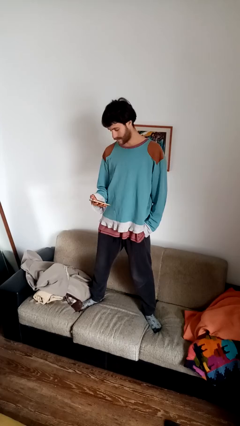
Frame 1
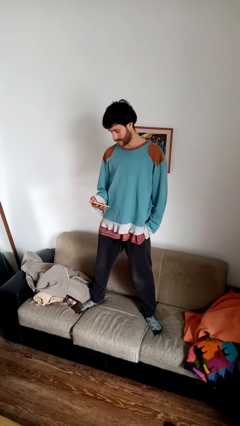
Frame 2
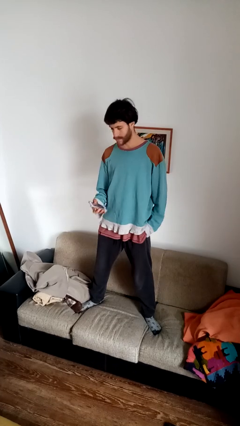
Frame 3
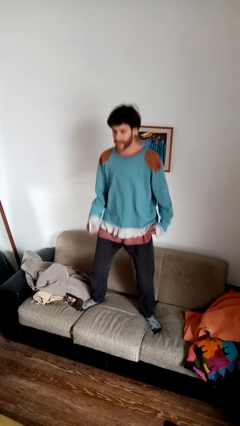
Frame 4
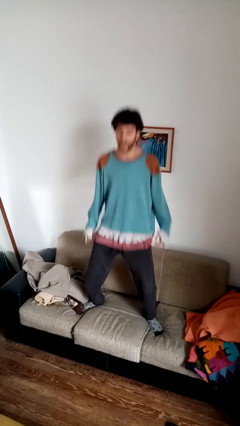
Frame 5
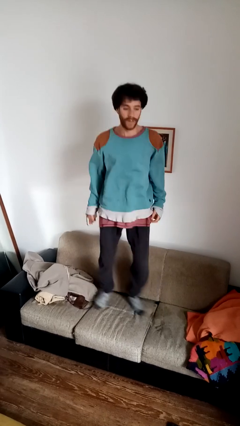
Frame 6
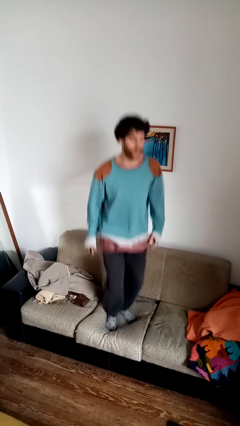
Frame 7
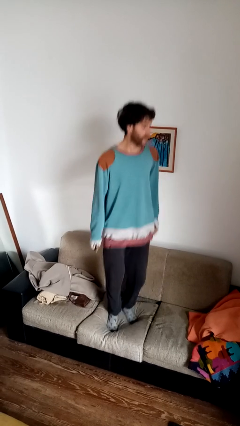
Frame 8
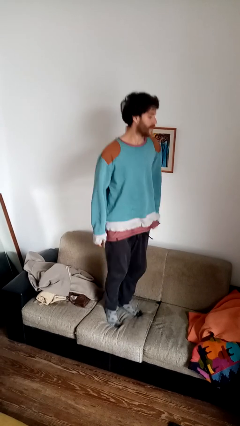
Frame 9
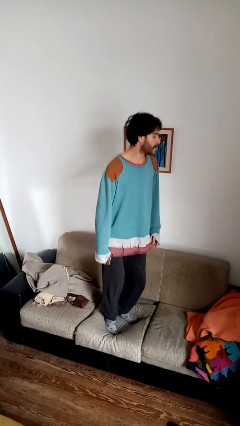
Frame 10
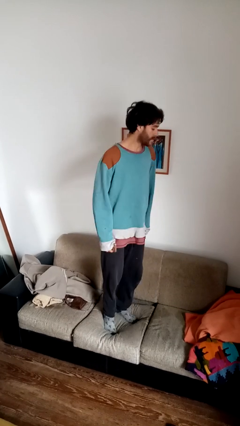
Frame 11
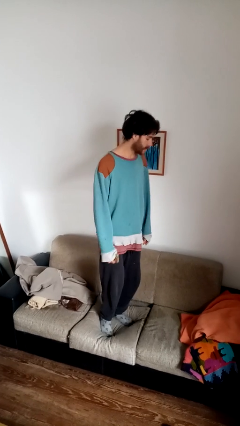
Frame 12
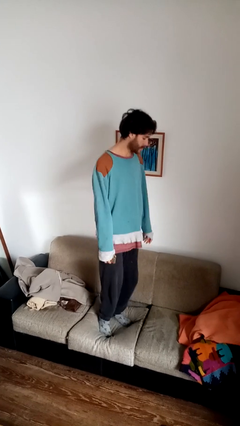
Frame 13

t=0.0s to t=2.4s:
person jumps on couch

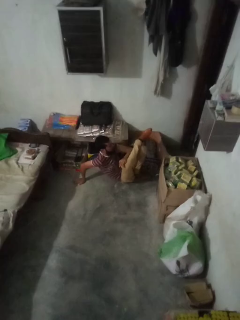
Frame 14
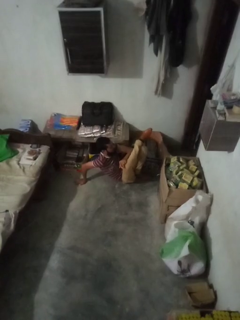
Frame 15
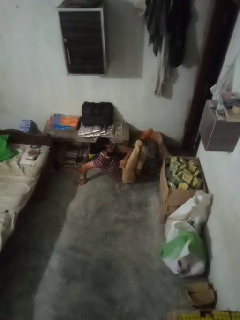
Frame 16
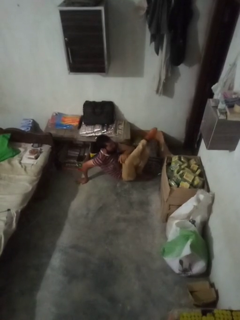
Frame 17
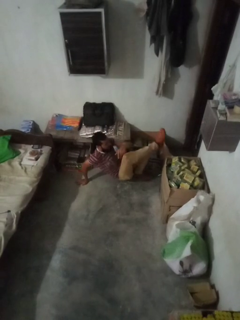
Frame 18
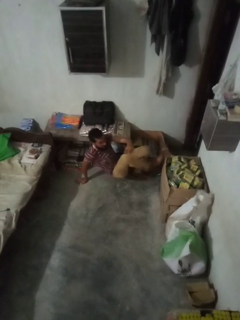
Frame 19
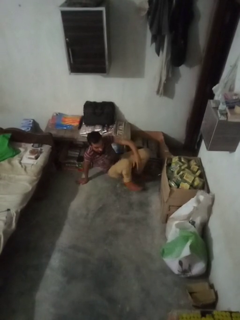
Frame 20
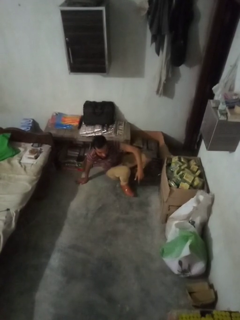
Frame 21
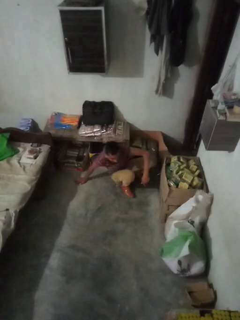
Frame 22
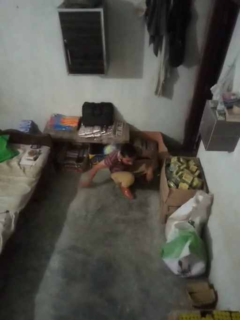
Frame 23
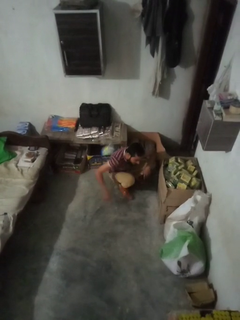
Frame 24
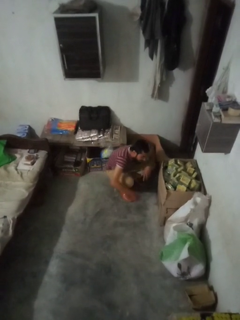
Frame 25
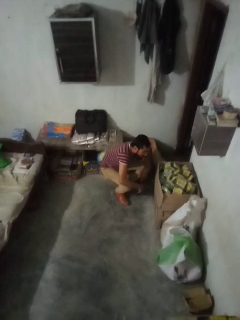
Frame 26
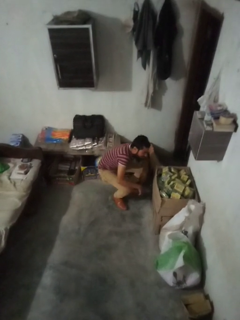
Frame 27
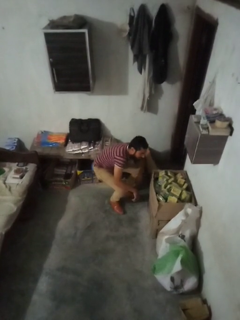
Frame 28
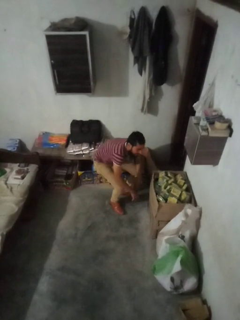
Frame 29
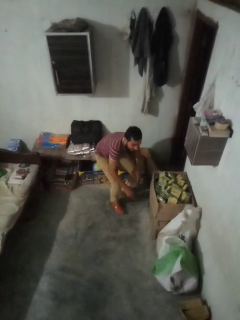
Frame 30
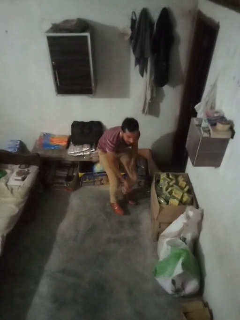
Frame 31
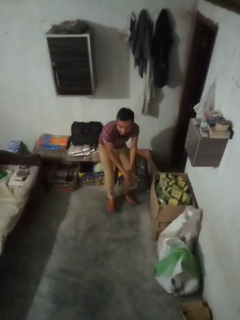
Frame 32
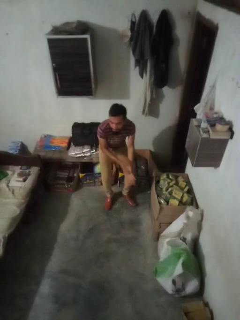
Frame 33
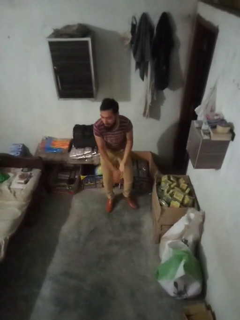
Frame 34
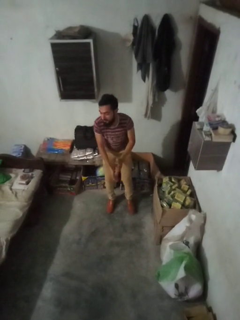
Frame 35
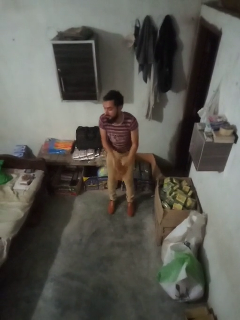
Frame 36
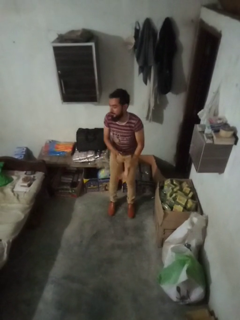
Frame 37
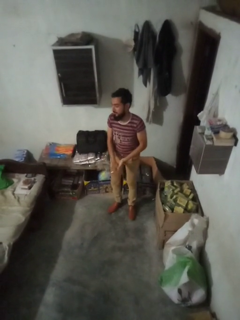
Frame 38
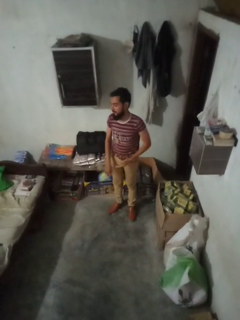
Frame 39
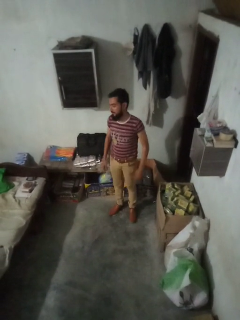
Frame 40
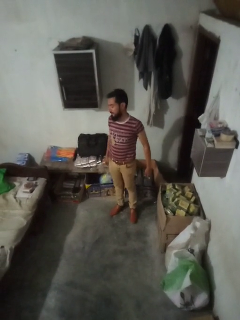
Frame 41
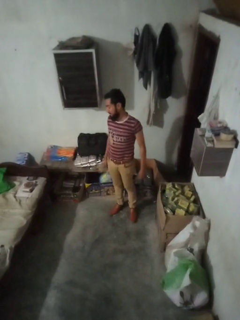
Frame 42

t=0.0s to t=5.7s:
person stands up from floor

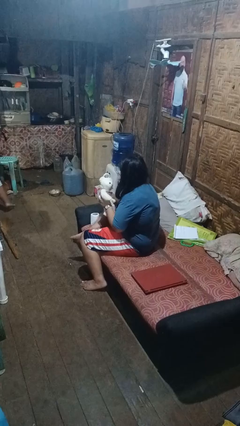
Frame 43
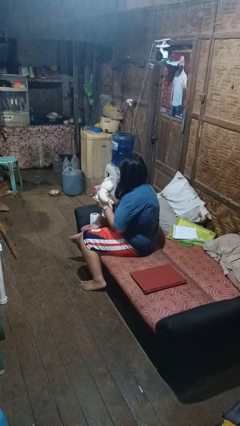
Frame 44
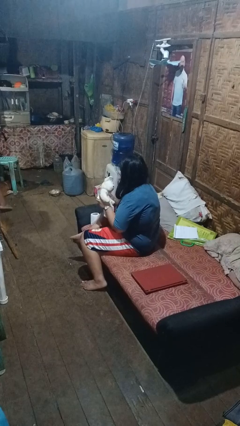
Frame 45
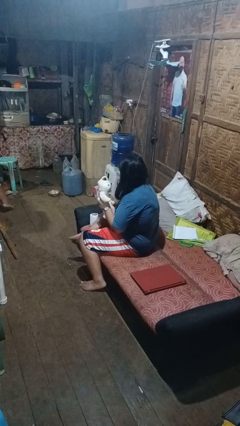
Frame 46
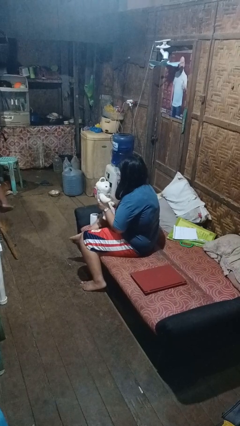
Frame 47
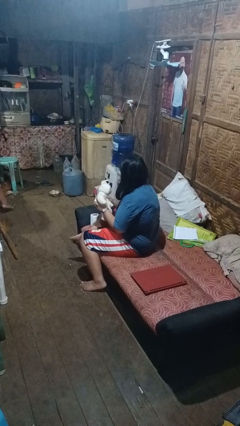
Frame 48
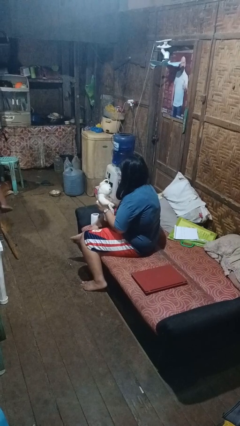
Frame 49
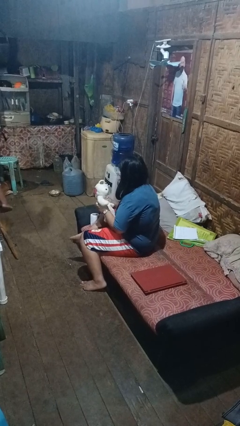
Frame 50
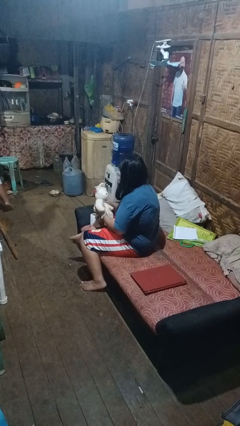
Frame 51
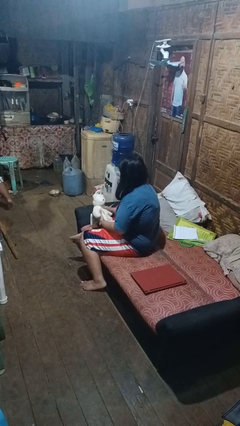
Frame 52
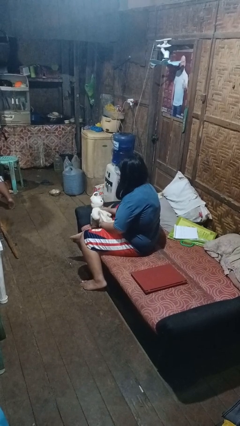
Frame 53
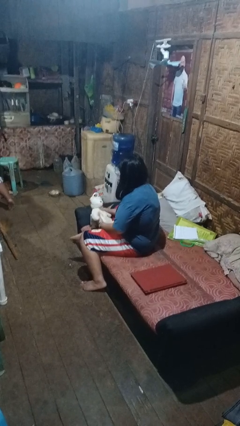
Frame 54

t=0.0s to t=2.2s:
person squeezes object

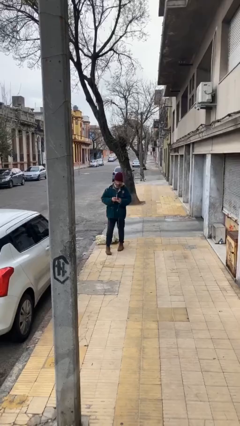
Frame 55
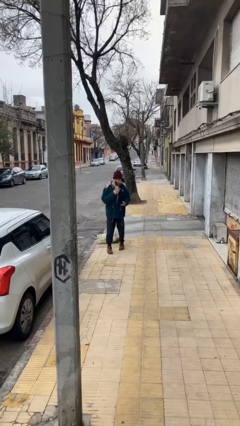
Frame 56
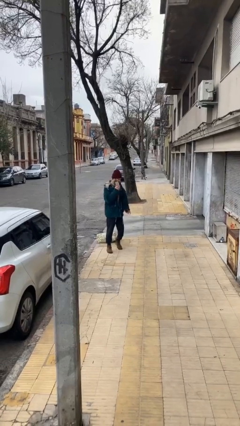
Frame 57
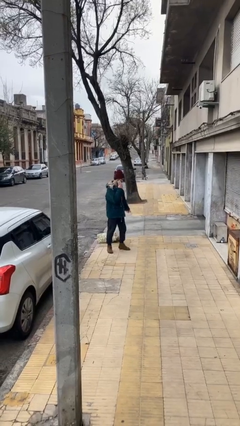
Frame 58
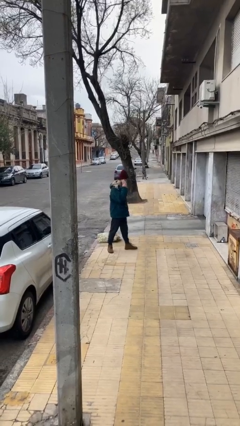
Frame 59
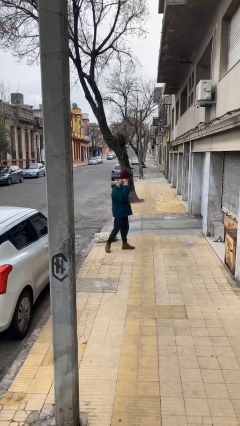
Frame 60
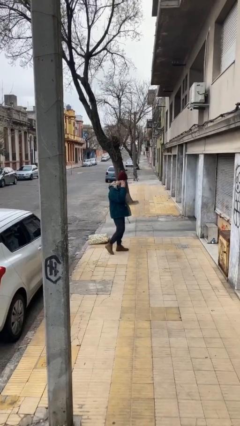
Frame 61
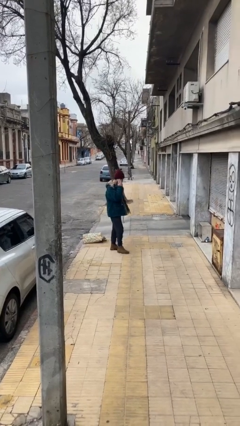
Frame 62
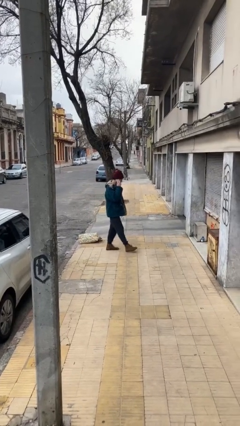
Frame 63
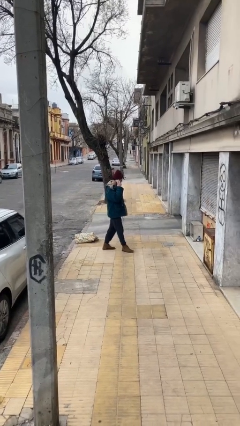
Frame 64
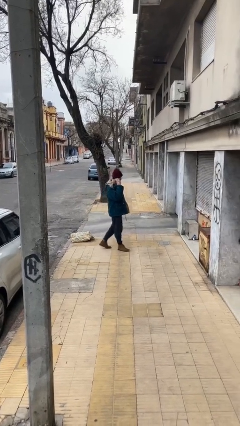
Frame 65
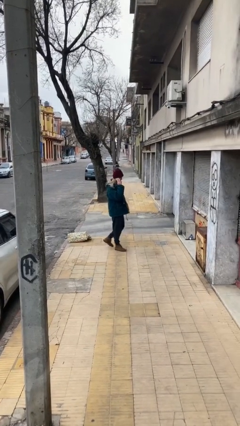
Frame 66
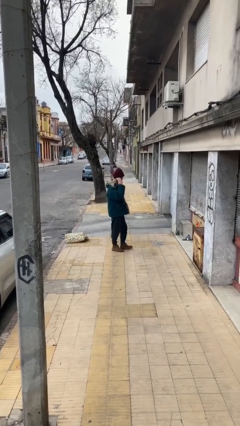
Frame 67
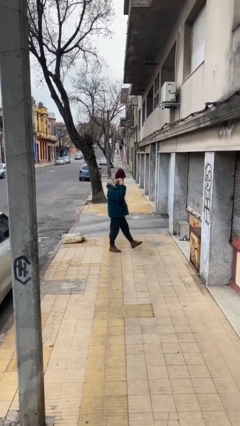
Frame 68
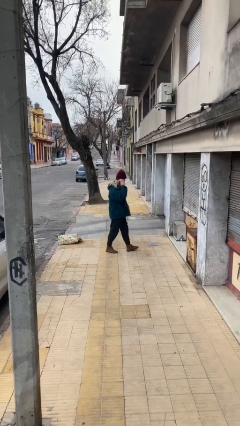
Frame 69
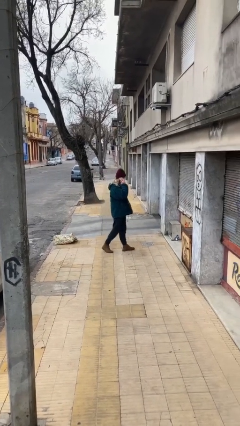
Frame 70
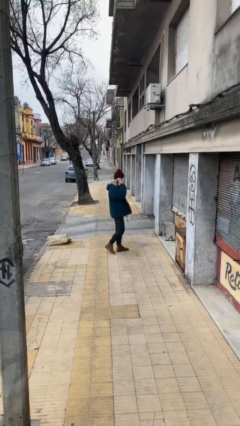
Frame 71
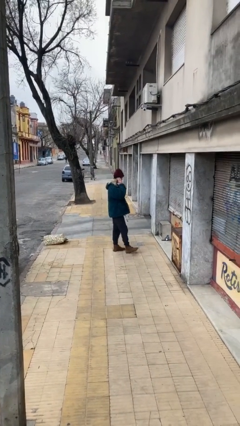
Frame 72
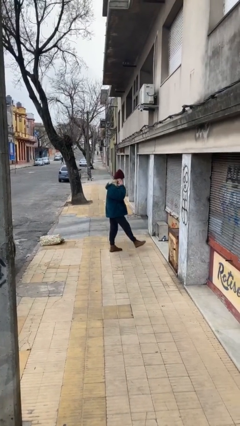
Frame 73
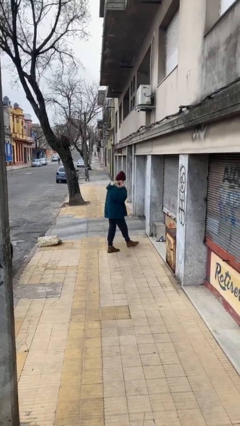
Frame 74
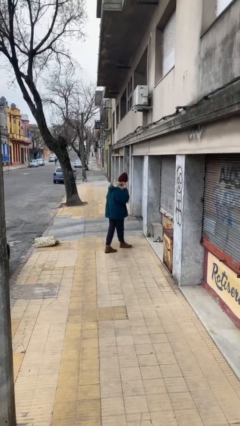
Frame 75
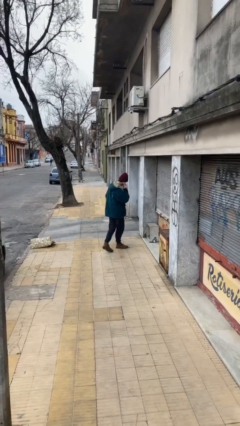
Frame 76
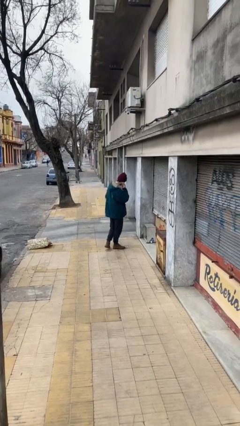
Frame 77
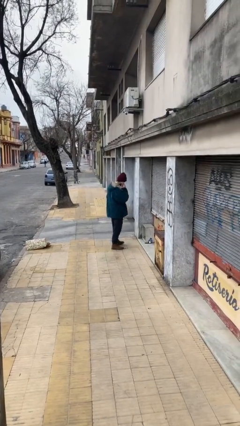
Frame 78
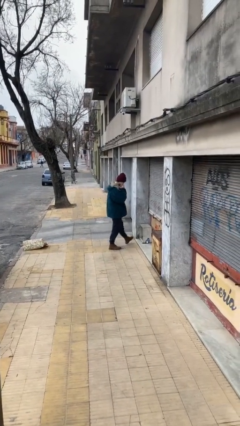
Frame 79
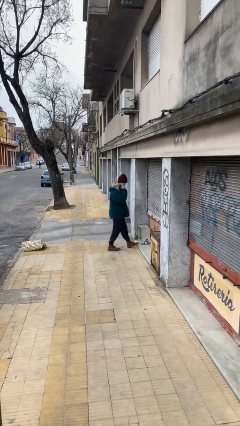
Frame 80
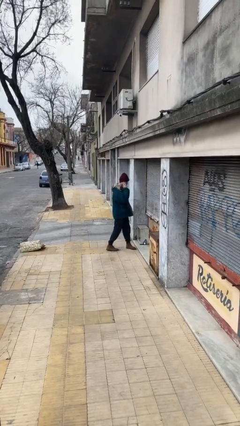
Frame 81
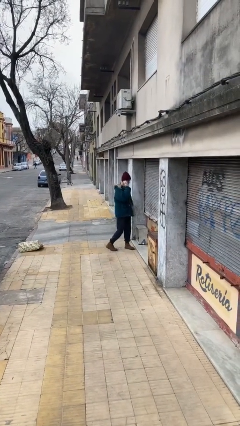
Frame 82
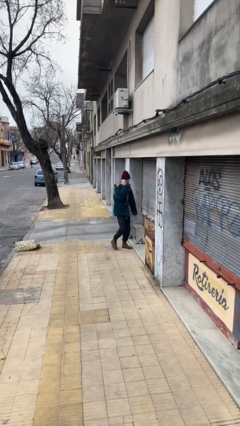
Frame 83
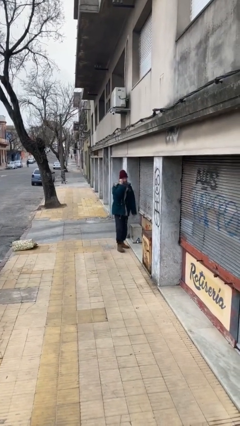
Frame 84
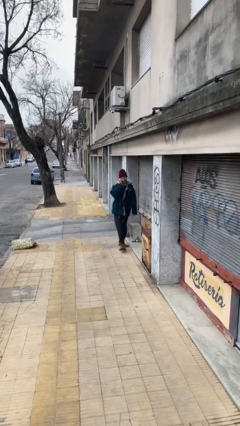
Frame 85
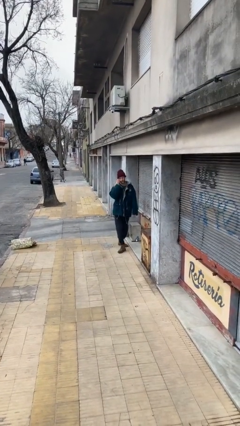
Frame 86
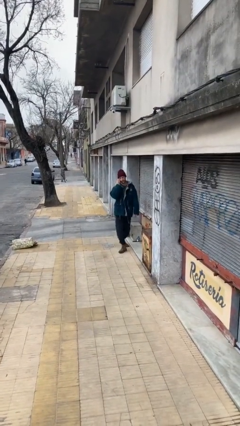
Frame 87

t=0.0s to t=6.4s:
person talks on phone

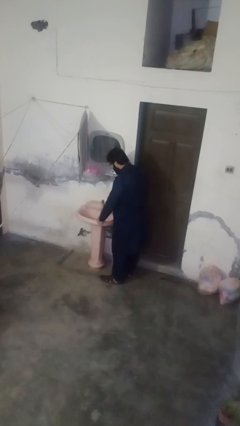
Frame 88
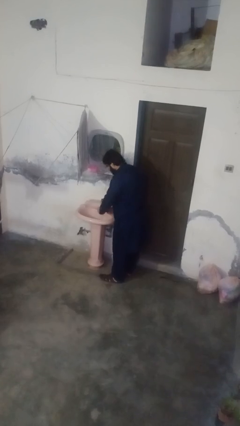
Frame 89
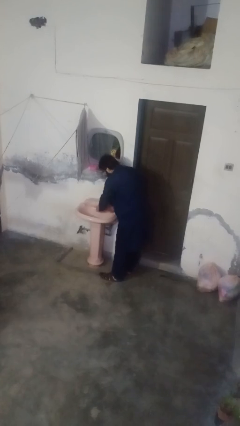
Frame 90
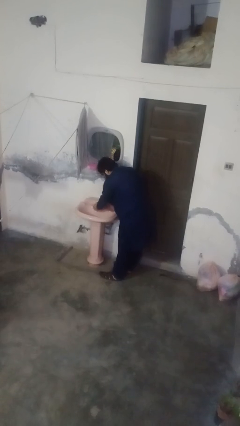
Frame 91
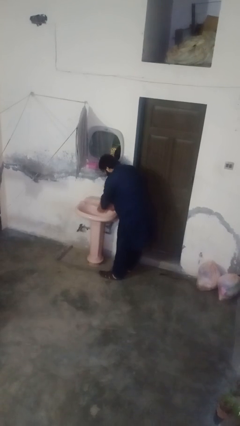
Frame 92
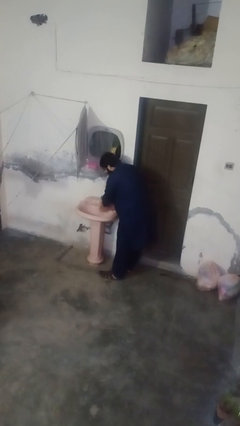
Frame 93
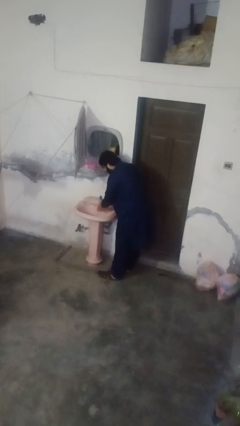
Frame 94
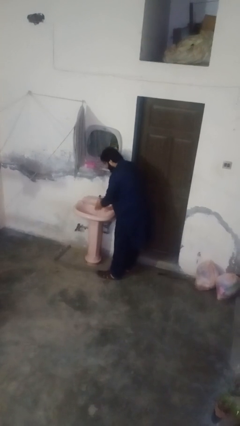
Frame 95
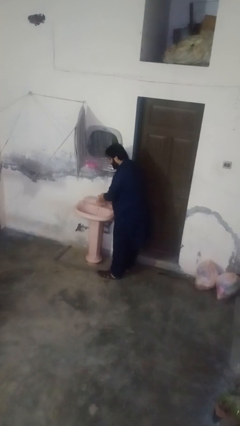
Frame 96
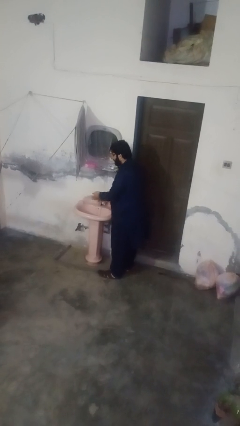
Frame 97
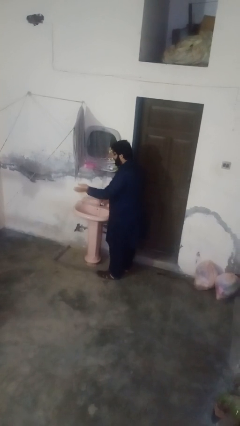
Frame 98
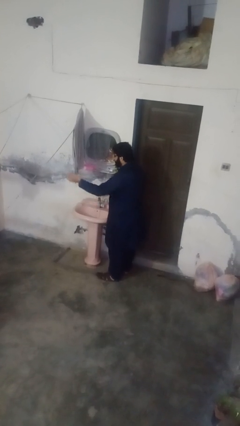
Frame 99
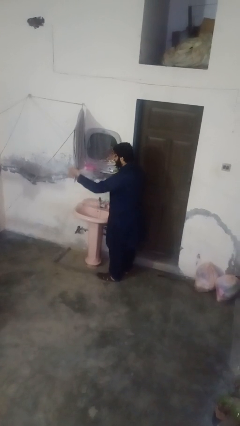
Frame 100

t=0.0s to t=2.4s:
person washes hands
